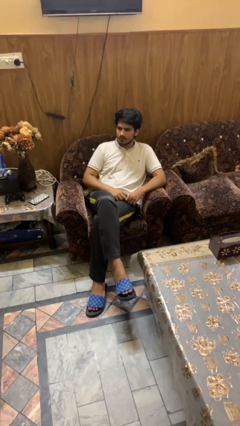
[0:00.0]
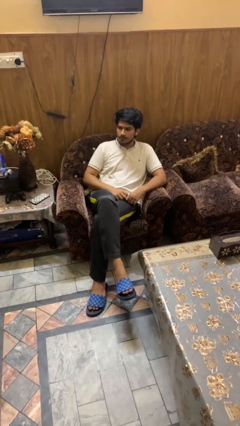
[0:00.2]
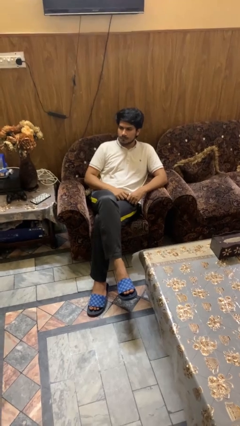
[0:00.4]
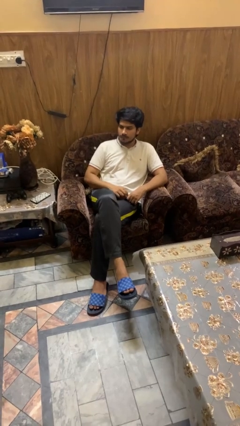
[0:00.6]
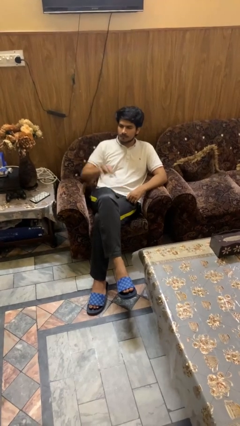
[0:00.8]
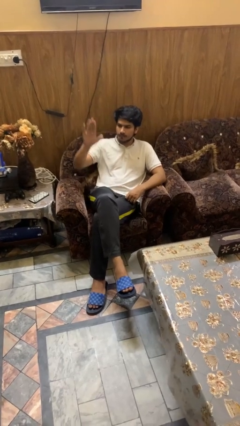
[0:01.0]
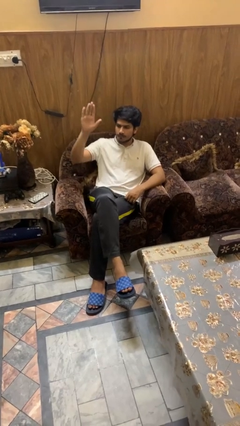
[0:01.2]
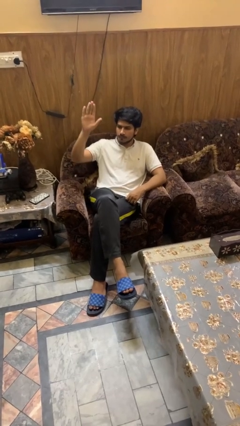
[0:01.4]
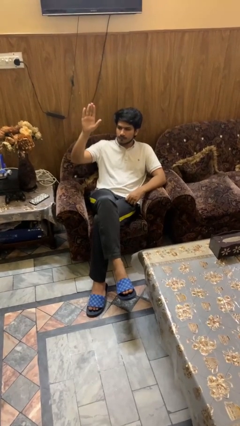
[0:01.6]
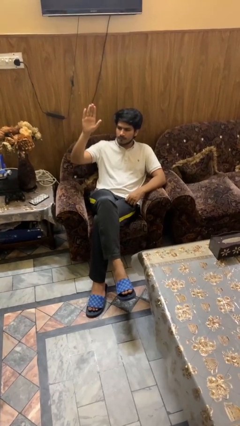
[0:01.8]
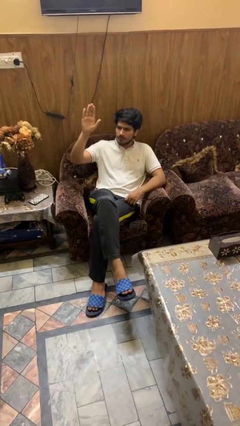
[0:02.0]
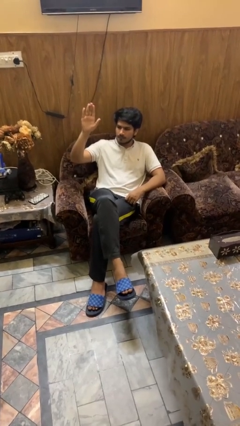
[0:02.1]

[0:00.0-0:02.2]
person gestures raise hand

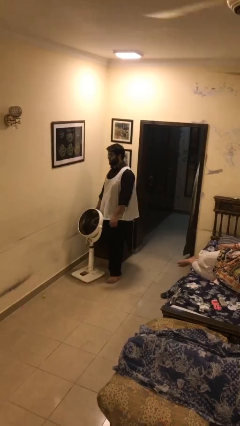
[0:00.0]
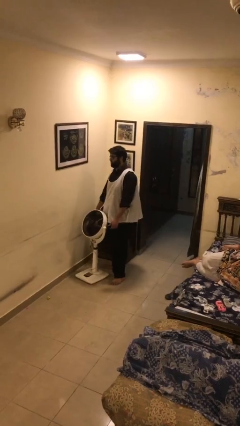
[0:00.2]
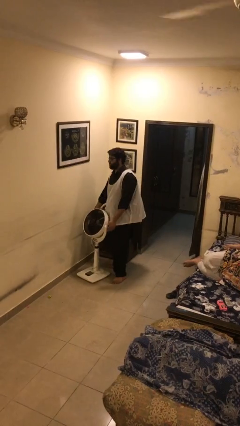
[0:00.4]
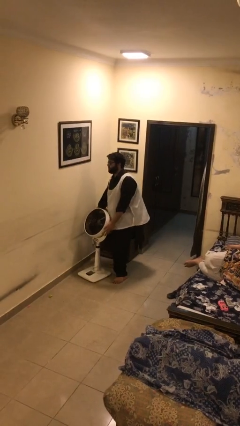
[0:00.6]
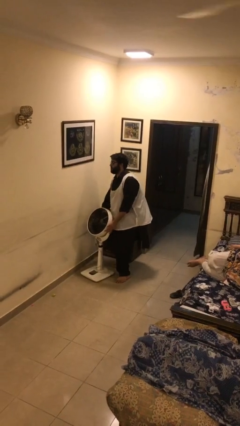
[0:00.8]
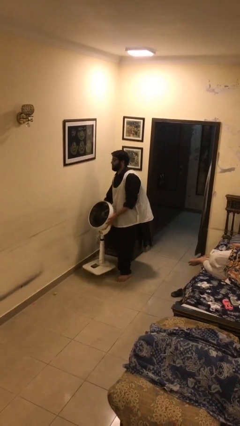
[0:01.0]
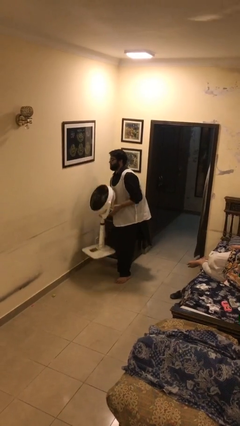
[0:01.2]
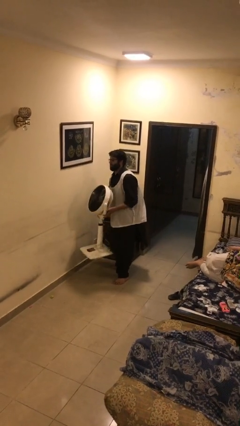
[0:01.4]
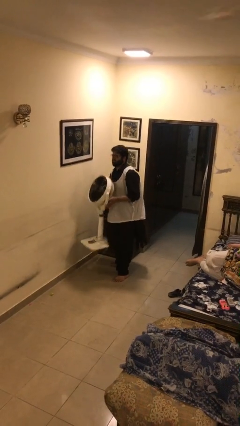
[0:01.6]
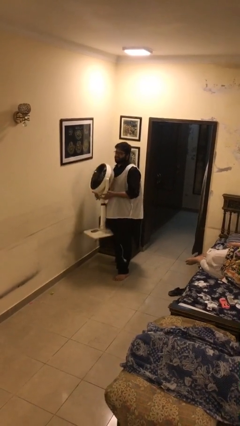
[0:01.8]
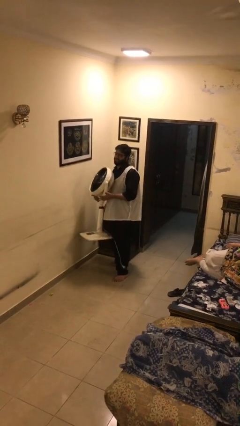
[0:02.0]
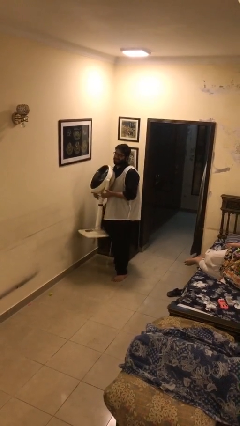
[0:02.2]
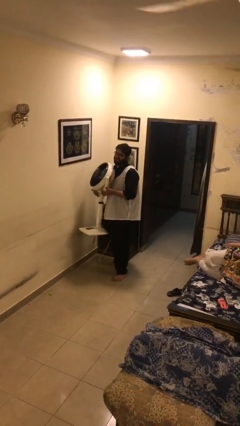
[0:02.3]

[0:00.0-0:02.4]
person picks up object from floor

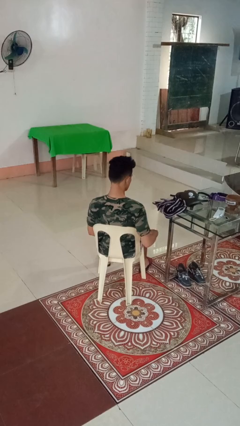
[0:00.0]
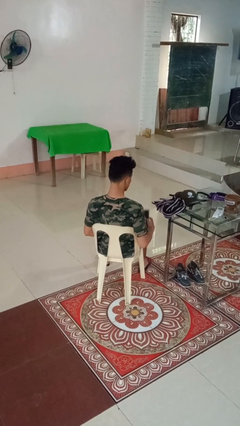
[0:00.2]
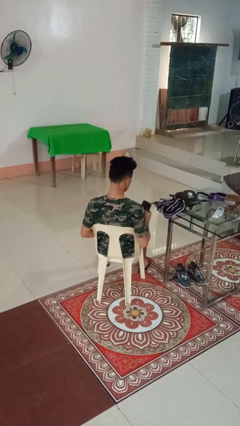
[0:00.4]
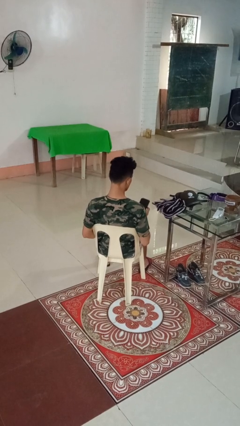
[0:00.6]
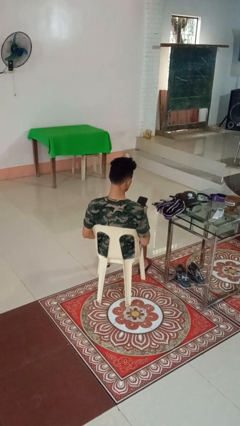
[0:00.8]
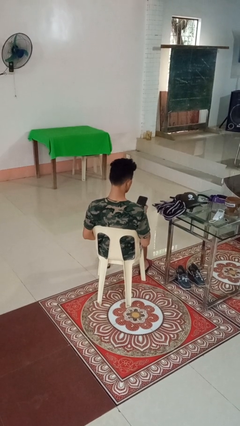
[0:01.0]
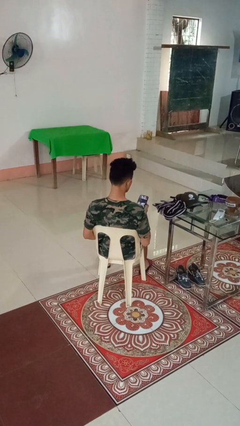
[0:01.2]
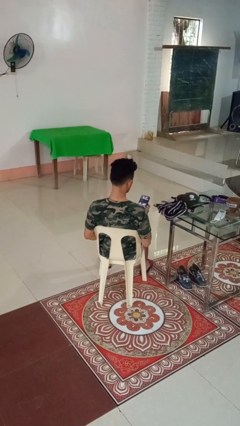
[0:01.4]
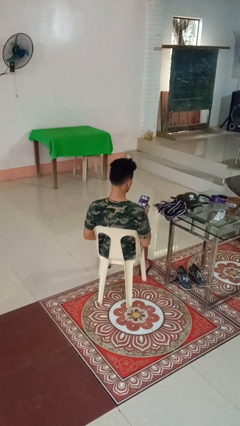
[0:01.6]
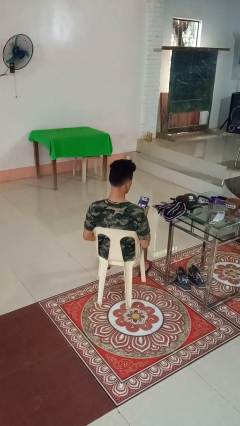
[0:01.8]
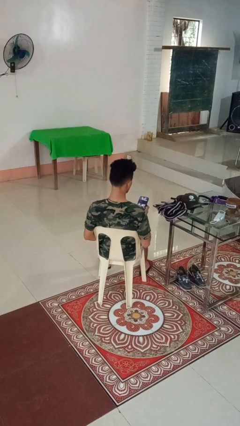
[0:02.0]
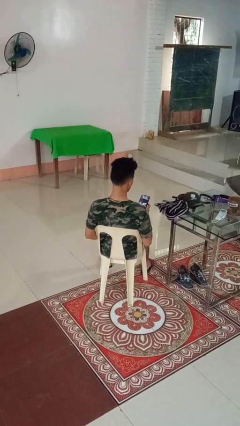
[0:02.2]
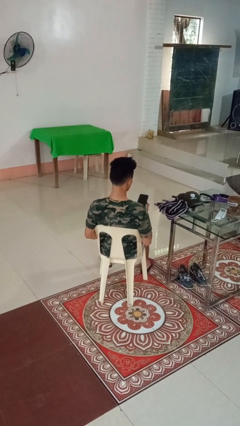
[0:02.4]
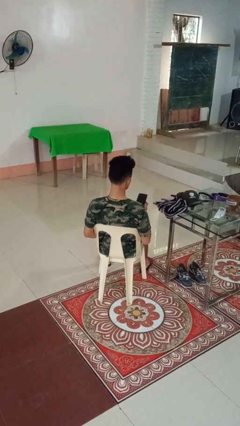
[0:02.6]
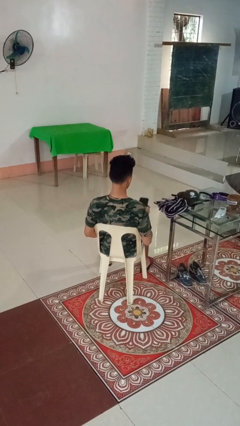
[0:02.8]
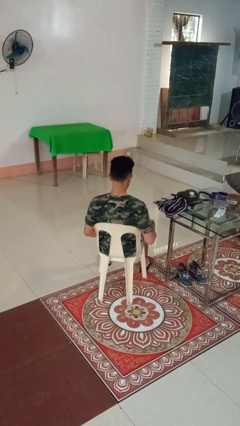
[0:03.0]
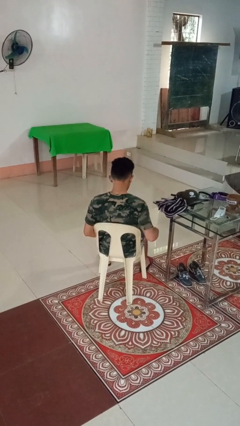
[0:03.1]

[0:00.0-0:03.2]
person takes phone from pocket

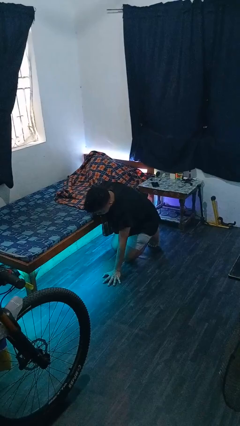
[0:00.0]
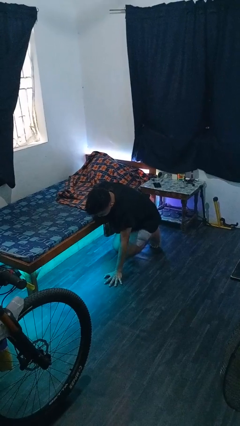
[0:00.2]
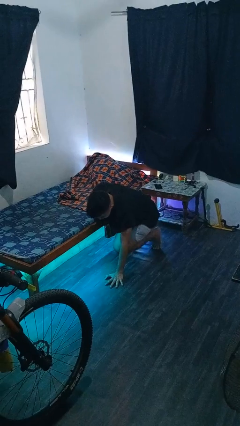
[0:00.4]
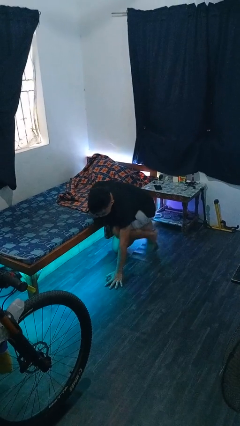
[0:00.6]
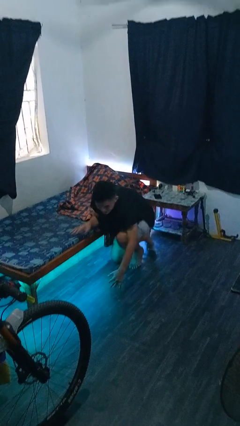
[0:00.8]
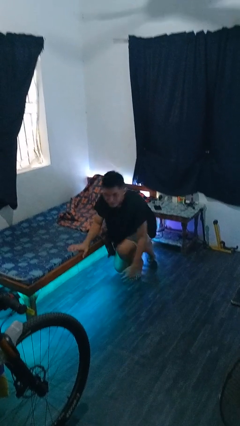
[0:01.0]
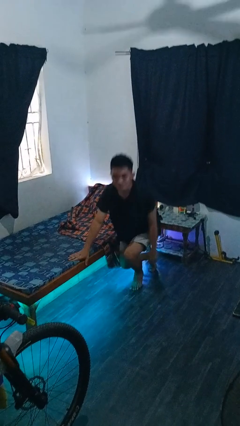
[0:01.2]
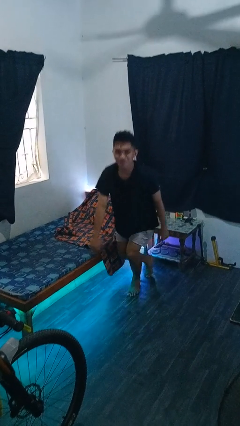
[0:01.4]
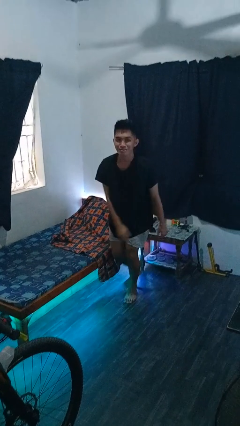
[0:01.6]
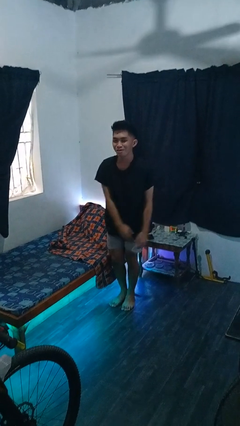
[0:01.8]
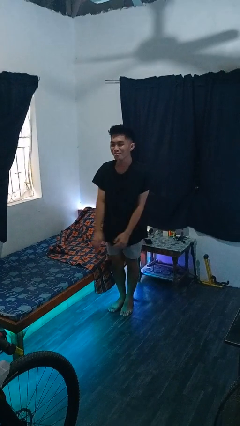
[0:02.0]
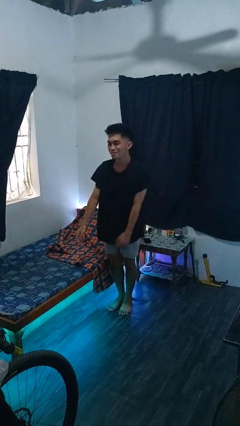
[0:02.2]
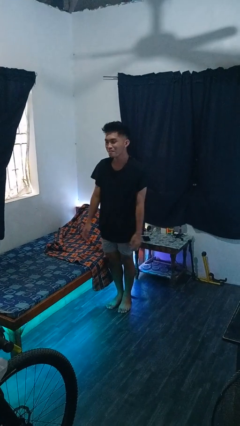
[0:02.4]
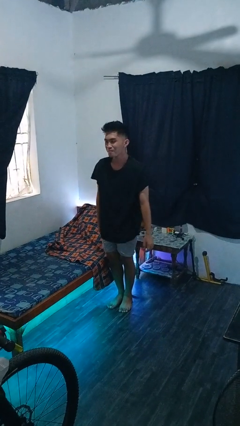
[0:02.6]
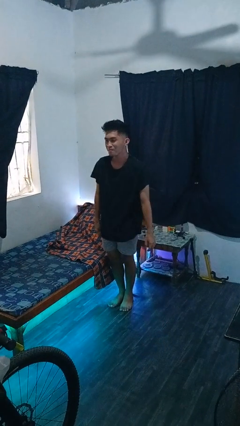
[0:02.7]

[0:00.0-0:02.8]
person stands up from floor

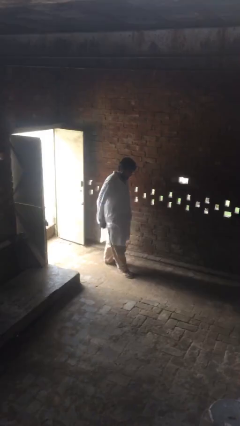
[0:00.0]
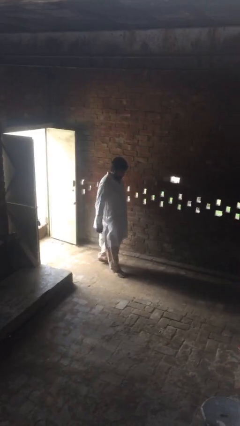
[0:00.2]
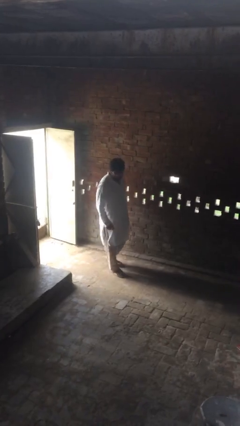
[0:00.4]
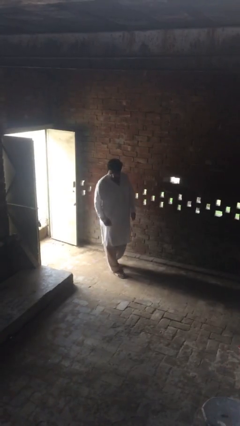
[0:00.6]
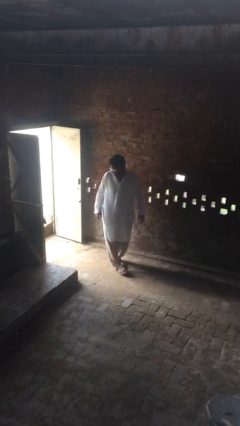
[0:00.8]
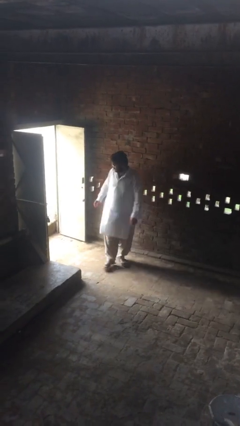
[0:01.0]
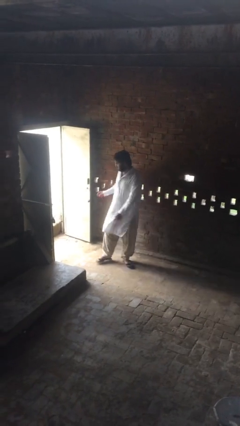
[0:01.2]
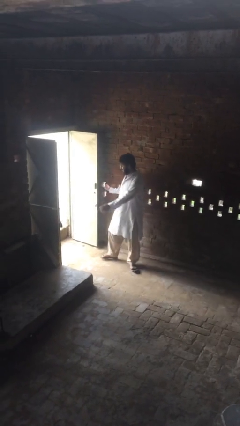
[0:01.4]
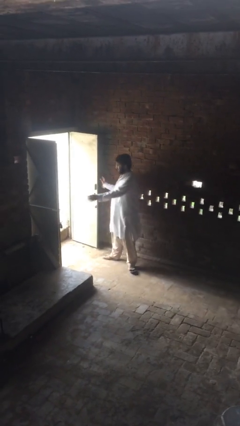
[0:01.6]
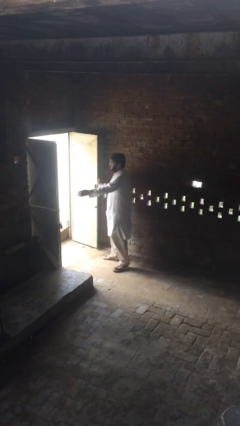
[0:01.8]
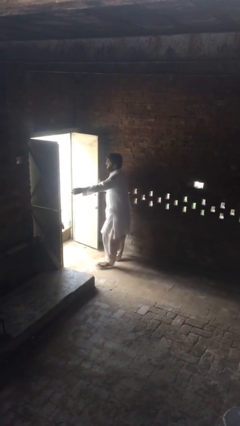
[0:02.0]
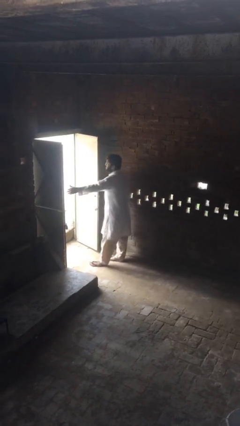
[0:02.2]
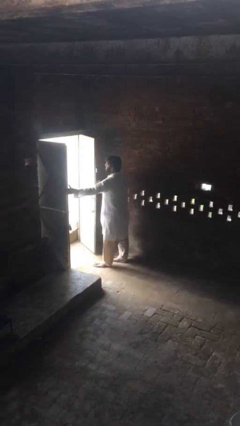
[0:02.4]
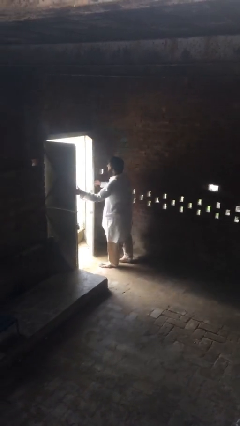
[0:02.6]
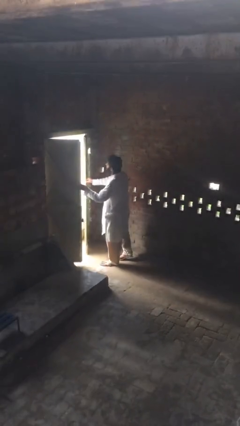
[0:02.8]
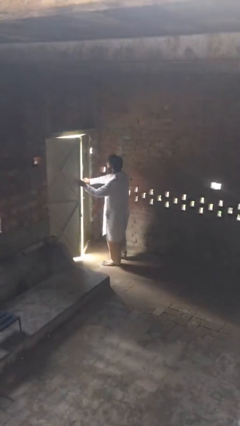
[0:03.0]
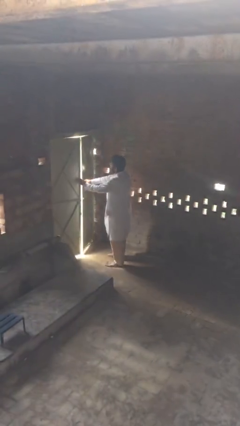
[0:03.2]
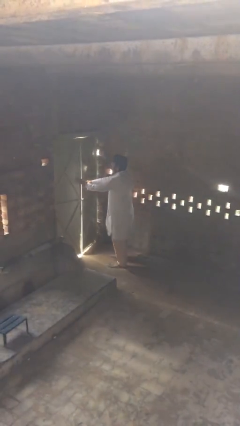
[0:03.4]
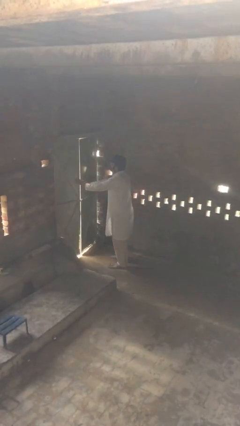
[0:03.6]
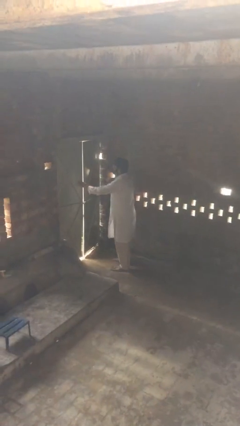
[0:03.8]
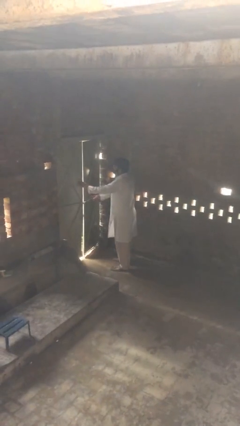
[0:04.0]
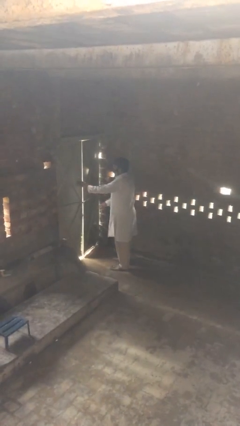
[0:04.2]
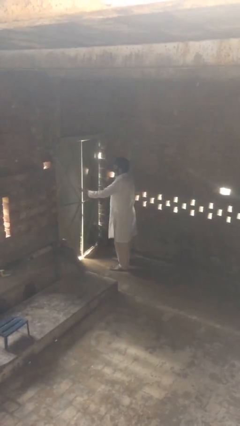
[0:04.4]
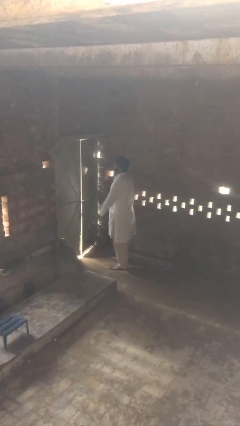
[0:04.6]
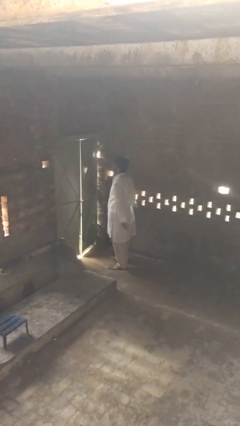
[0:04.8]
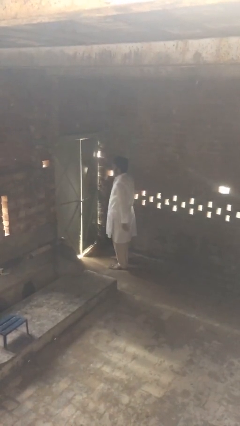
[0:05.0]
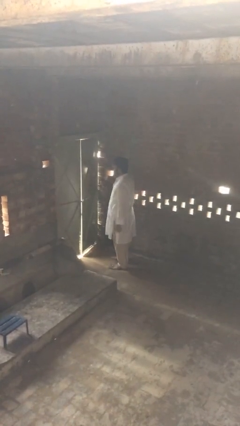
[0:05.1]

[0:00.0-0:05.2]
person closes facility door

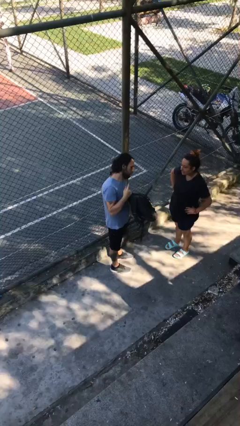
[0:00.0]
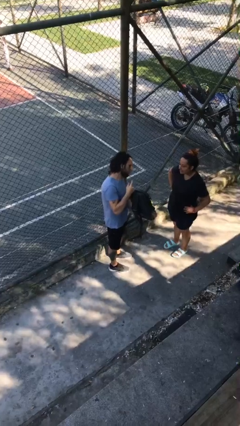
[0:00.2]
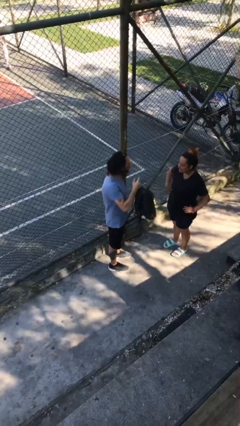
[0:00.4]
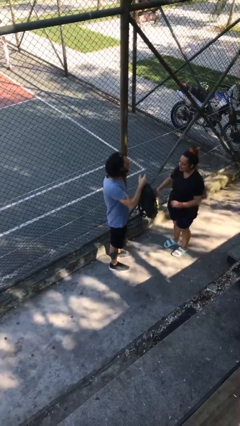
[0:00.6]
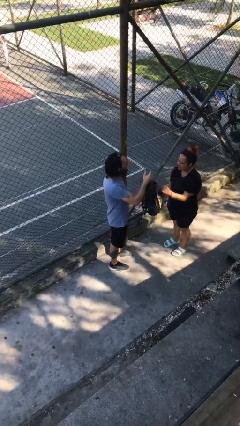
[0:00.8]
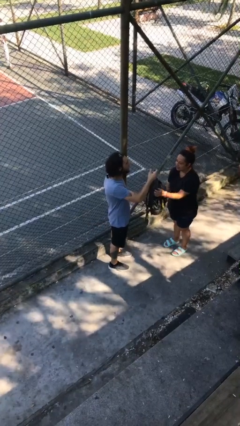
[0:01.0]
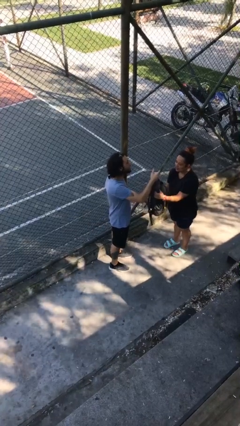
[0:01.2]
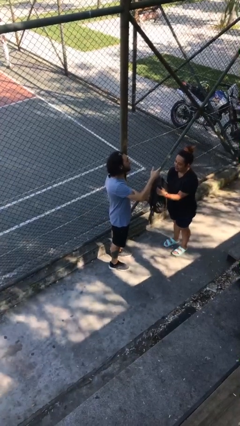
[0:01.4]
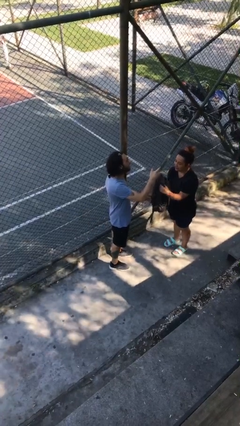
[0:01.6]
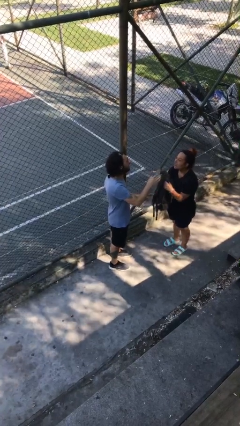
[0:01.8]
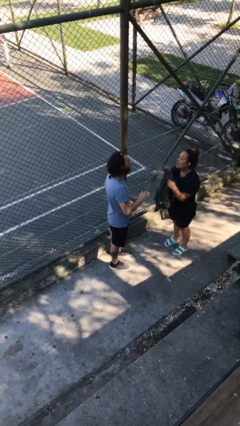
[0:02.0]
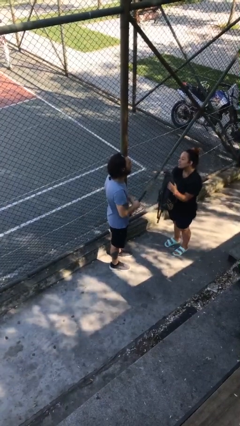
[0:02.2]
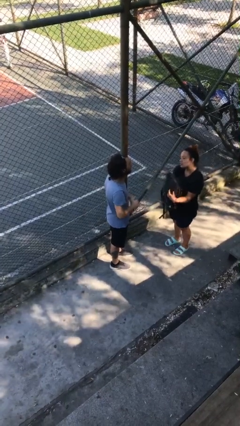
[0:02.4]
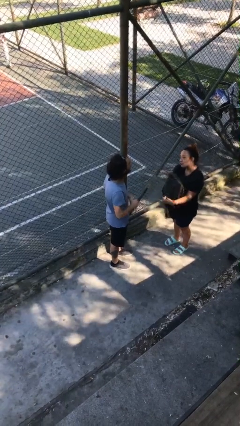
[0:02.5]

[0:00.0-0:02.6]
person transfers object to person
